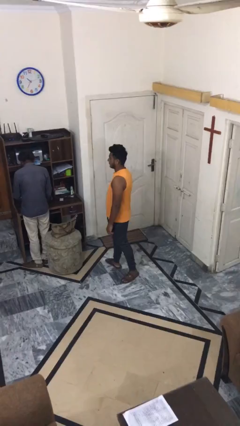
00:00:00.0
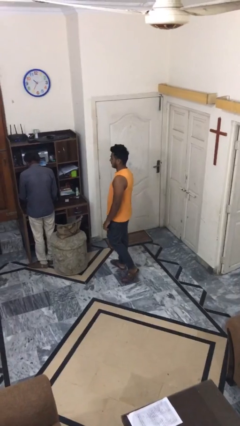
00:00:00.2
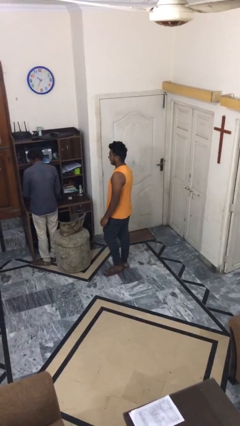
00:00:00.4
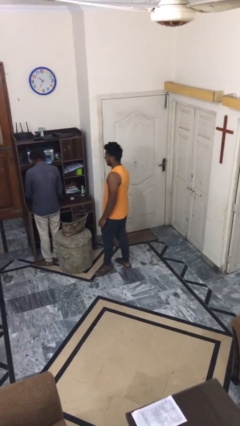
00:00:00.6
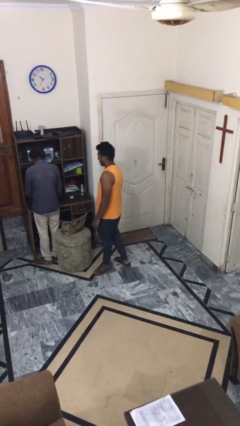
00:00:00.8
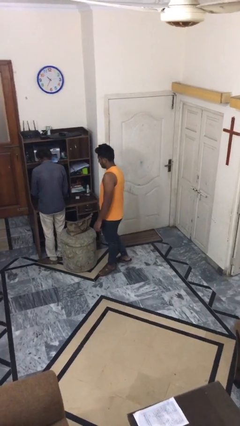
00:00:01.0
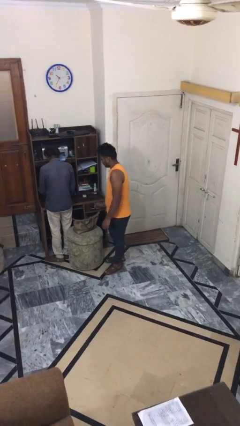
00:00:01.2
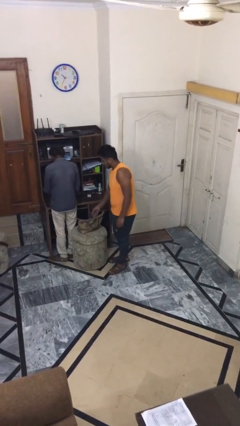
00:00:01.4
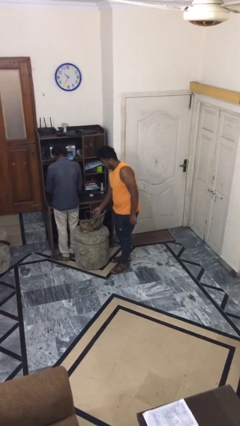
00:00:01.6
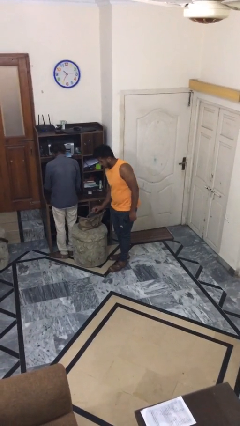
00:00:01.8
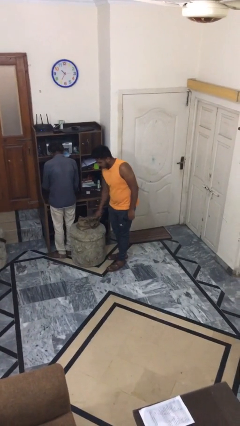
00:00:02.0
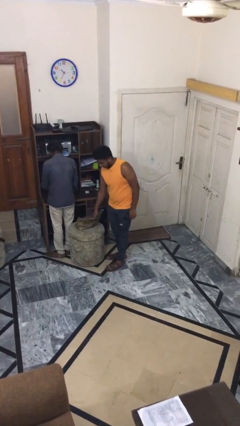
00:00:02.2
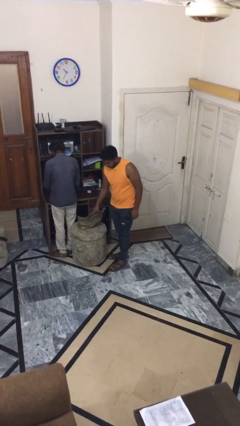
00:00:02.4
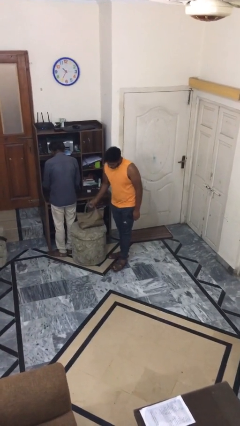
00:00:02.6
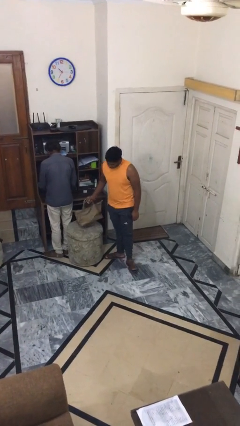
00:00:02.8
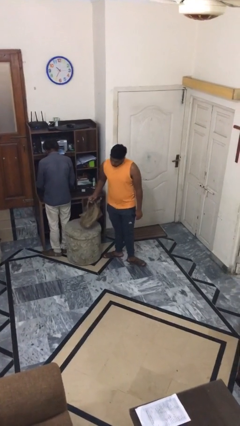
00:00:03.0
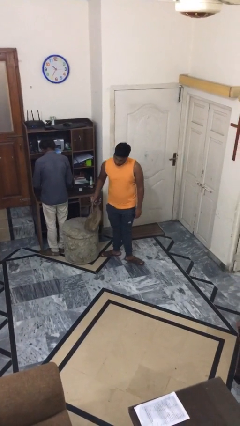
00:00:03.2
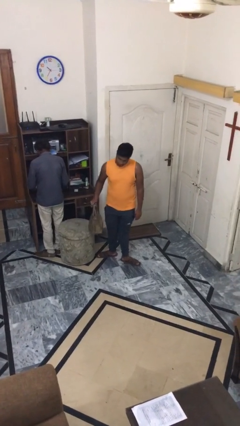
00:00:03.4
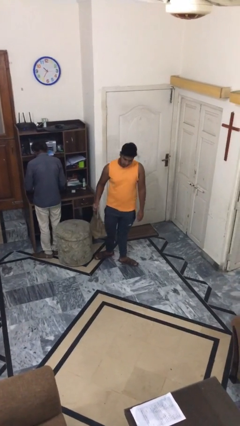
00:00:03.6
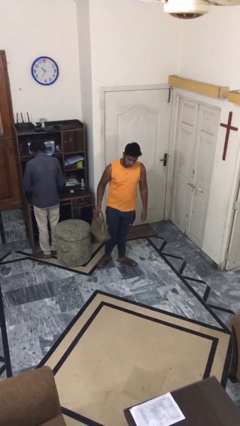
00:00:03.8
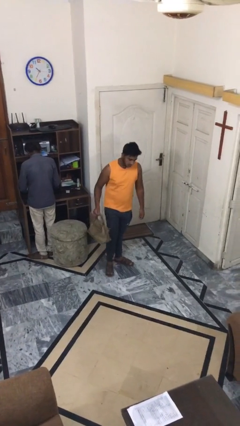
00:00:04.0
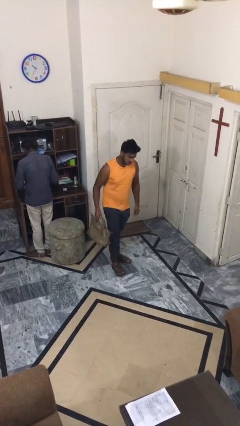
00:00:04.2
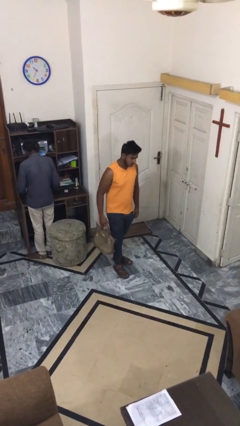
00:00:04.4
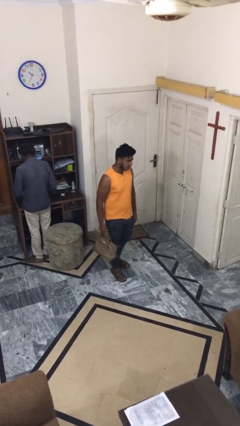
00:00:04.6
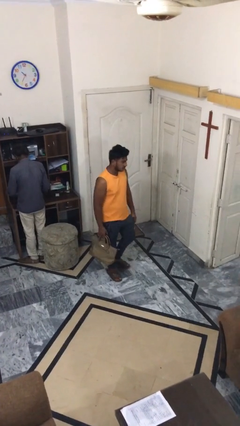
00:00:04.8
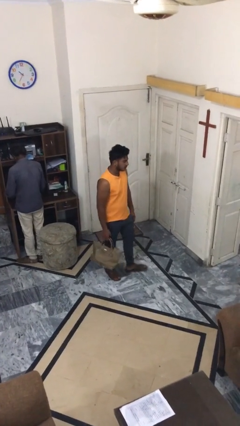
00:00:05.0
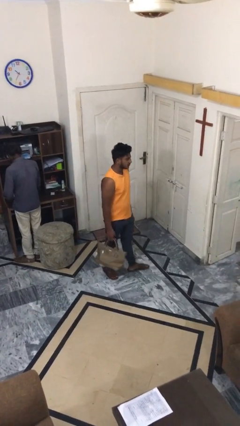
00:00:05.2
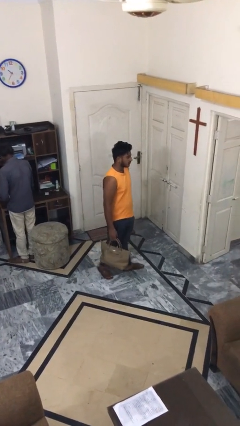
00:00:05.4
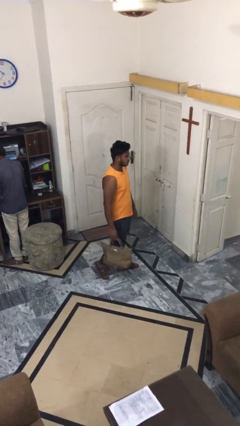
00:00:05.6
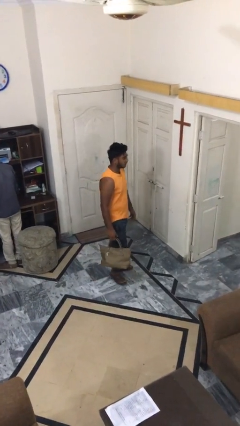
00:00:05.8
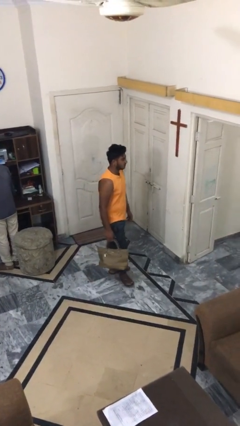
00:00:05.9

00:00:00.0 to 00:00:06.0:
person steals object from person

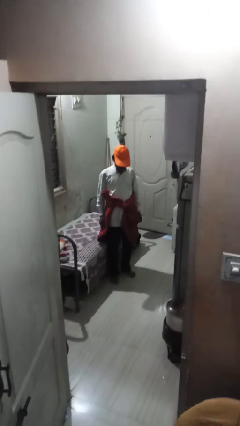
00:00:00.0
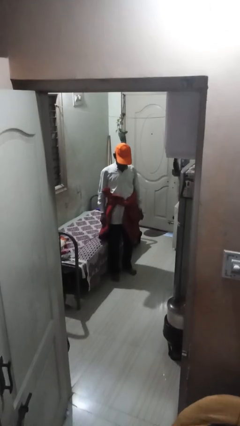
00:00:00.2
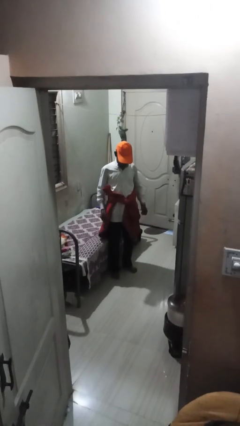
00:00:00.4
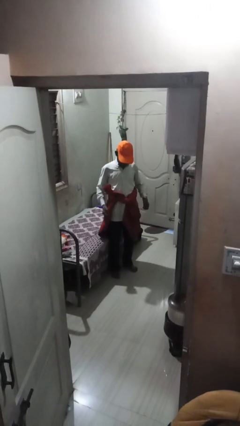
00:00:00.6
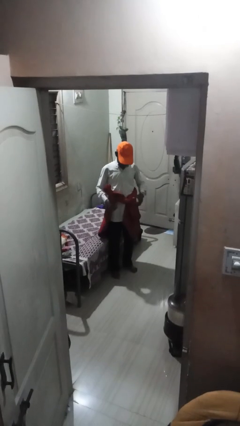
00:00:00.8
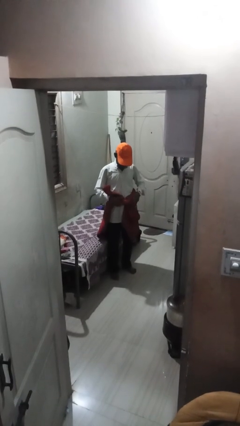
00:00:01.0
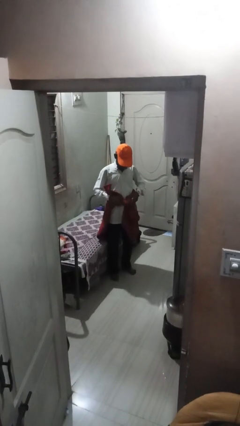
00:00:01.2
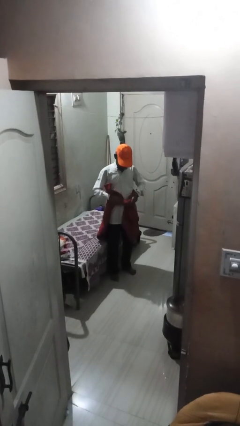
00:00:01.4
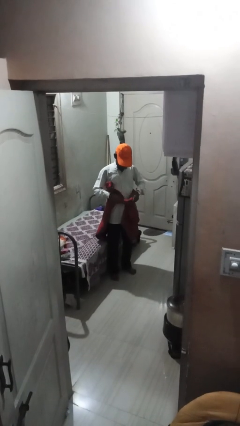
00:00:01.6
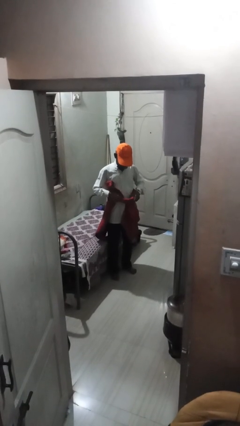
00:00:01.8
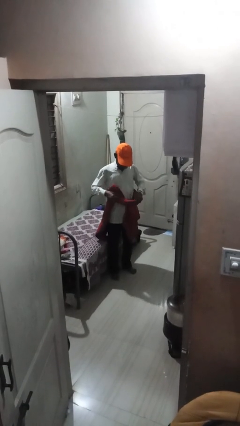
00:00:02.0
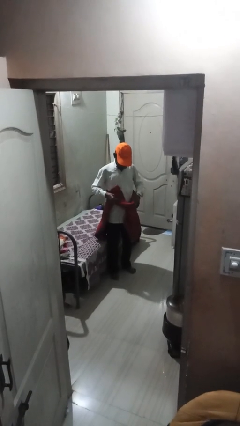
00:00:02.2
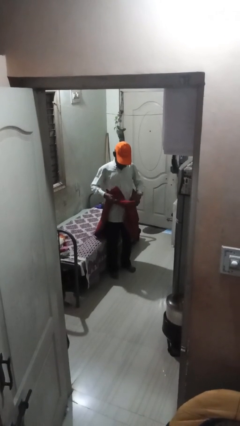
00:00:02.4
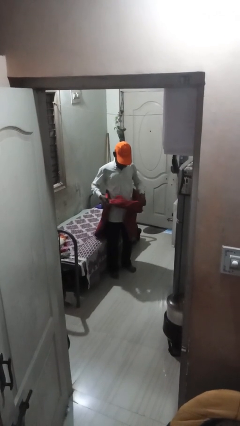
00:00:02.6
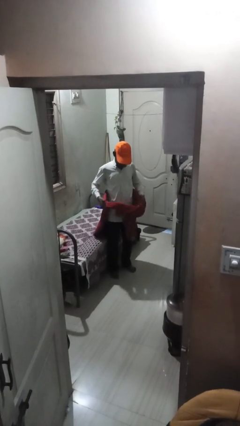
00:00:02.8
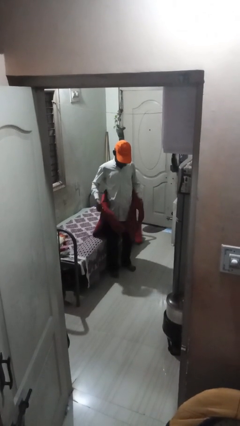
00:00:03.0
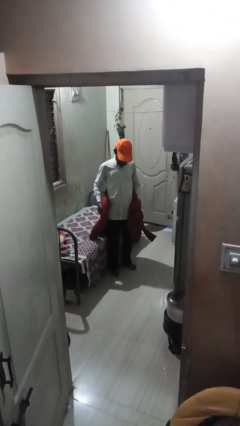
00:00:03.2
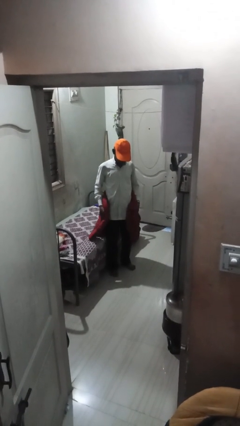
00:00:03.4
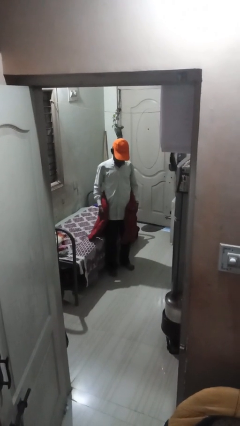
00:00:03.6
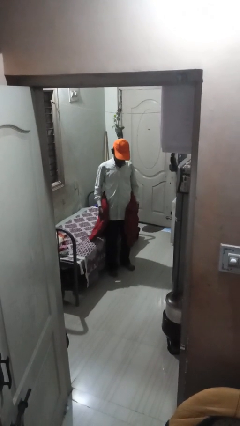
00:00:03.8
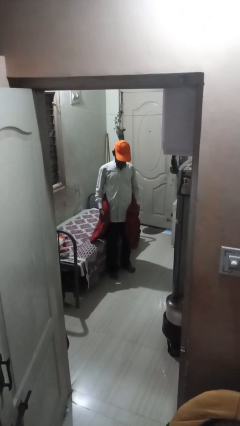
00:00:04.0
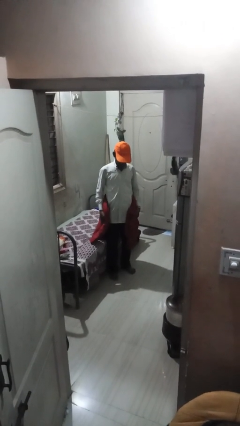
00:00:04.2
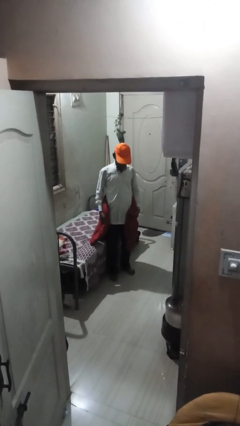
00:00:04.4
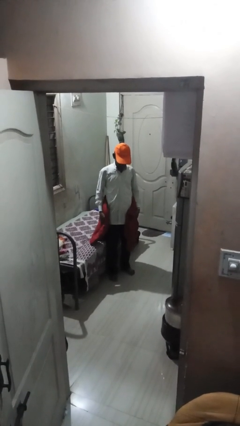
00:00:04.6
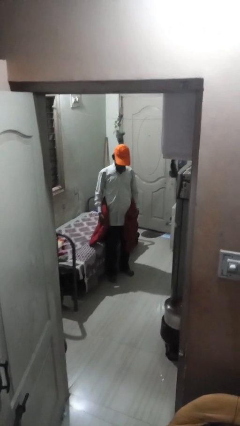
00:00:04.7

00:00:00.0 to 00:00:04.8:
person unties jacket around waist

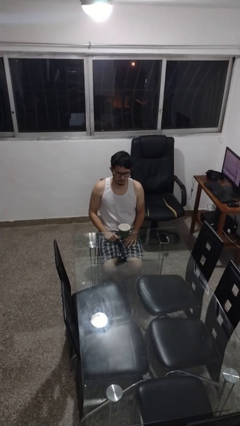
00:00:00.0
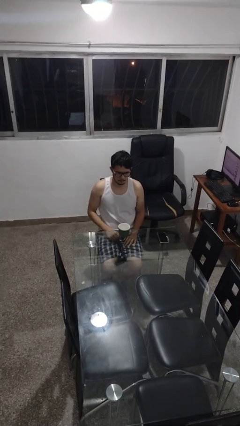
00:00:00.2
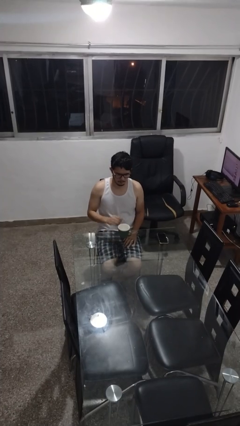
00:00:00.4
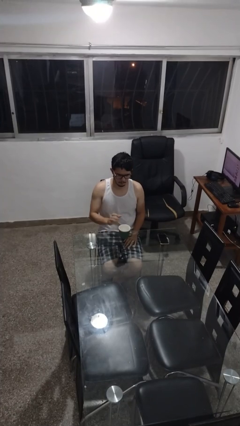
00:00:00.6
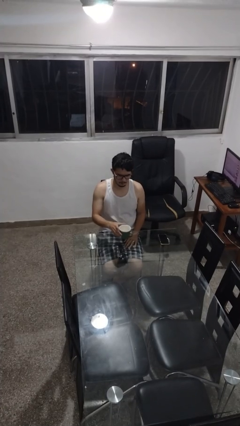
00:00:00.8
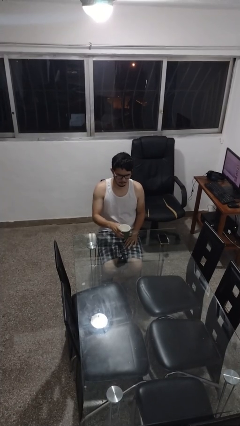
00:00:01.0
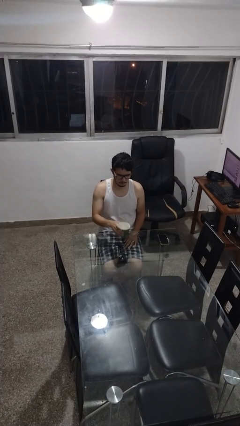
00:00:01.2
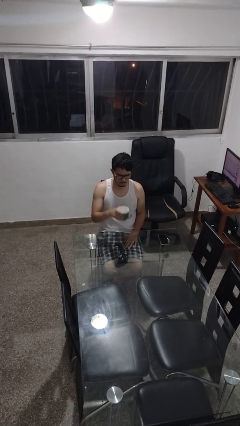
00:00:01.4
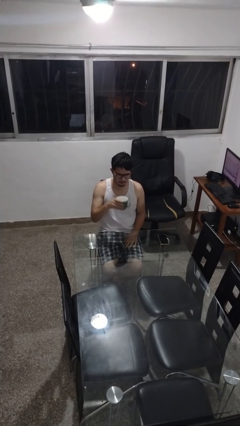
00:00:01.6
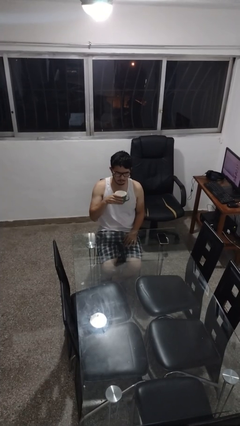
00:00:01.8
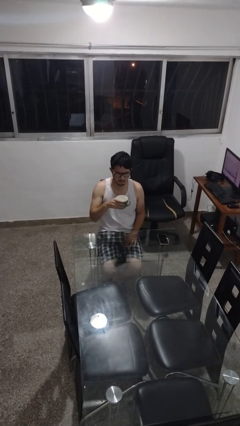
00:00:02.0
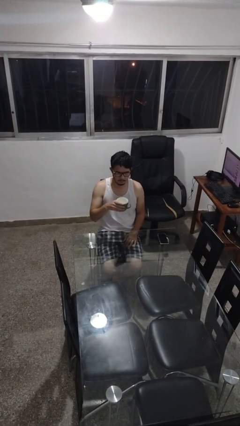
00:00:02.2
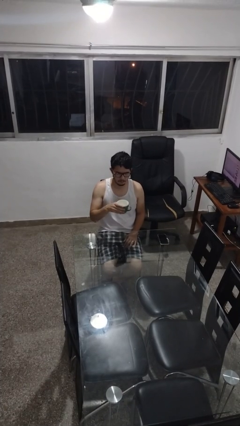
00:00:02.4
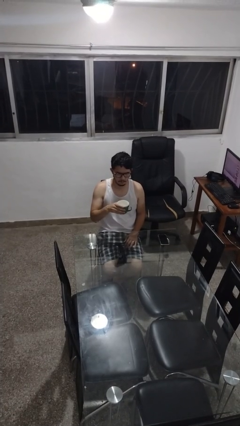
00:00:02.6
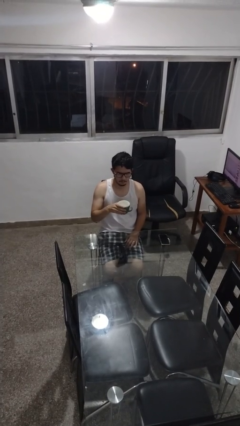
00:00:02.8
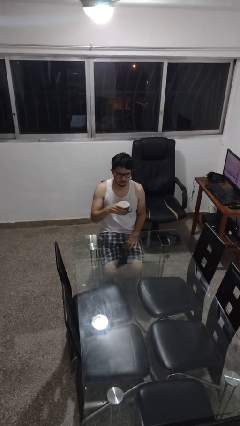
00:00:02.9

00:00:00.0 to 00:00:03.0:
person picks up object from table

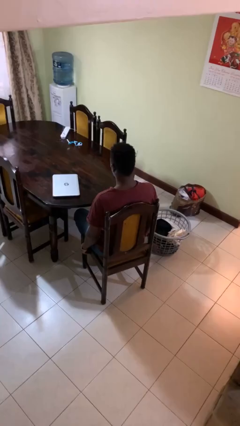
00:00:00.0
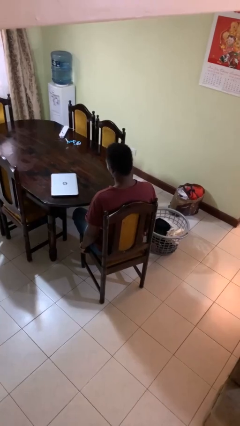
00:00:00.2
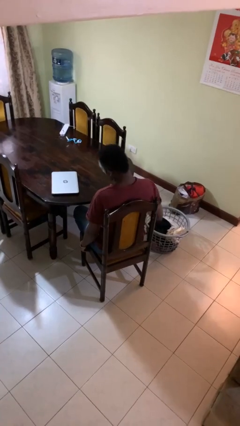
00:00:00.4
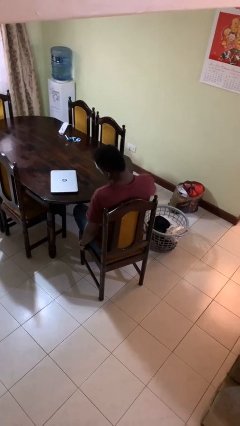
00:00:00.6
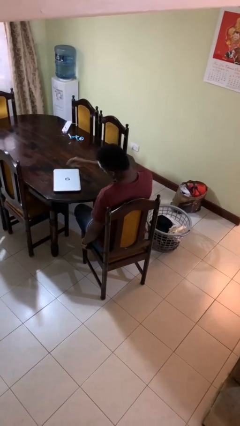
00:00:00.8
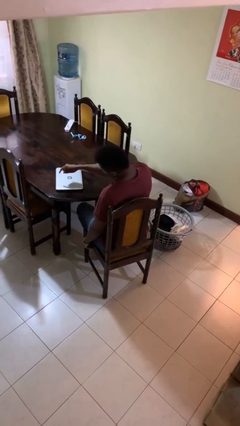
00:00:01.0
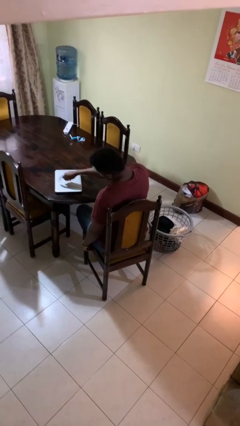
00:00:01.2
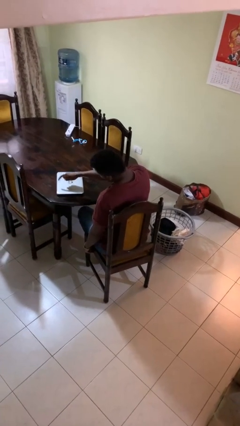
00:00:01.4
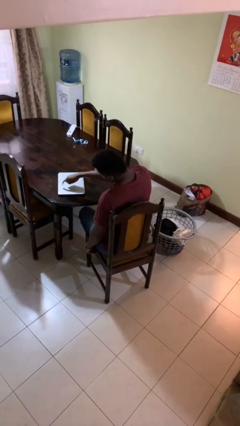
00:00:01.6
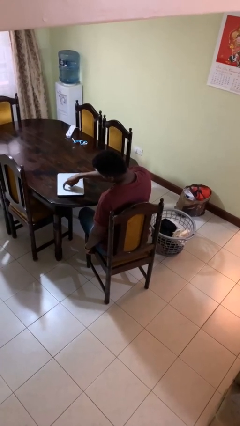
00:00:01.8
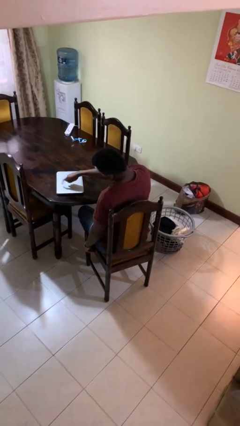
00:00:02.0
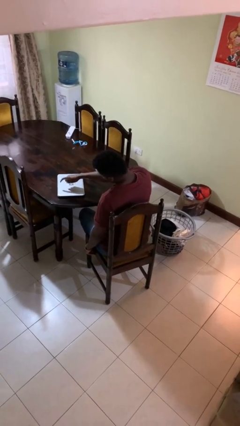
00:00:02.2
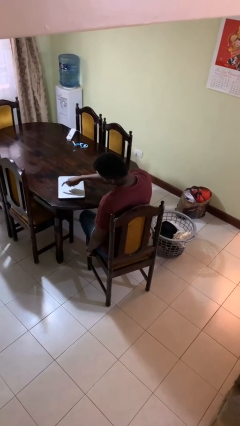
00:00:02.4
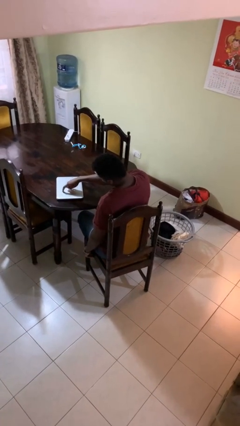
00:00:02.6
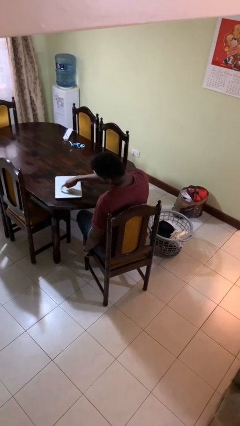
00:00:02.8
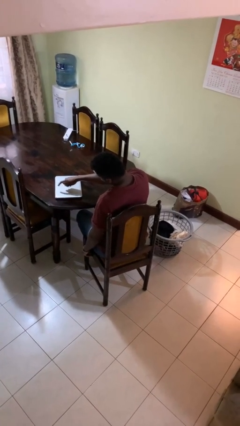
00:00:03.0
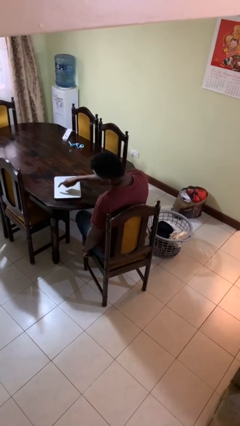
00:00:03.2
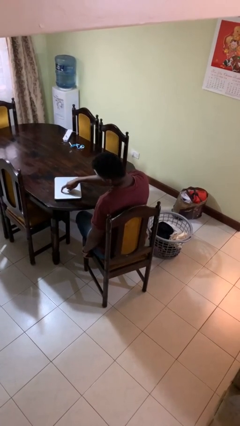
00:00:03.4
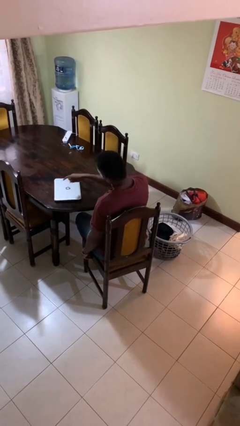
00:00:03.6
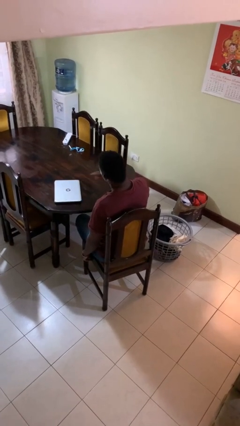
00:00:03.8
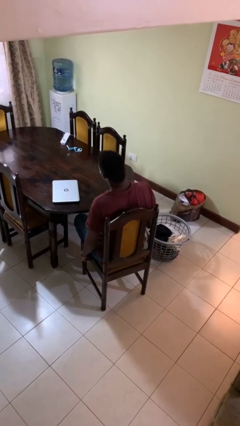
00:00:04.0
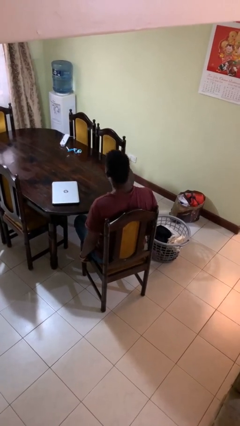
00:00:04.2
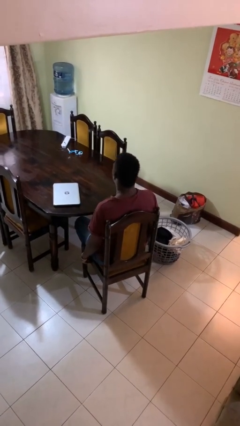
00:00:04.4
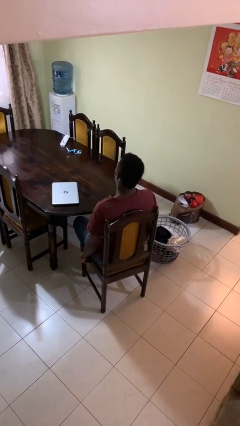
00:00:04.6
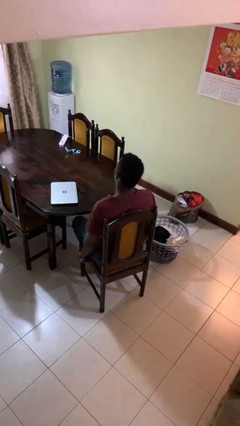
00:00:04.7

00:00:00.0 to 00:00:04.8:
person taps object with finger
